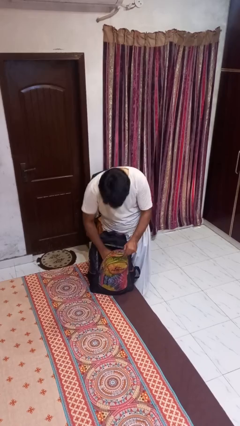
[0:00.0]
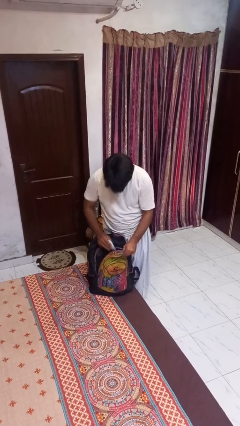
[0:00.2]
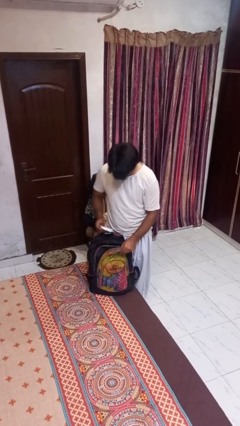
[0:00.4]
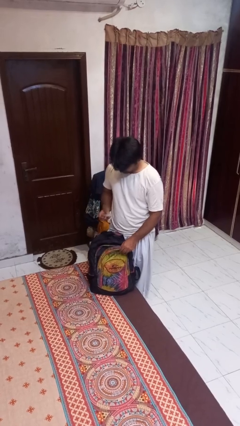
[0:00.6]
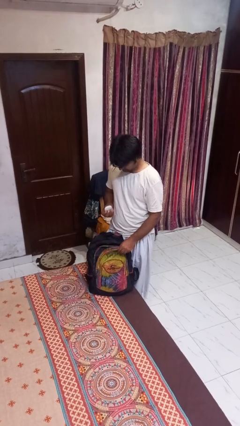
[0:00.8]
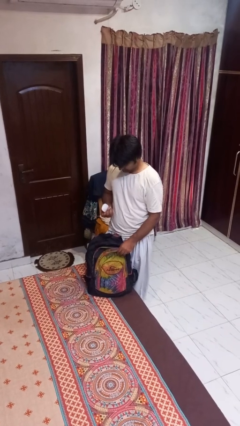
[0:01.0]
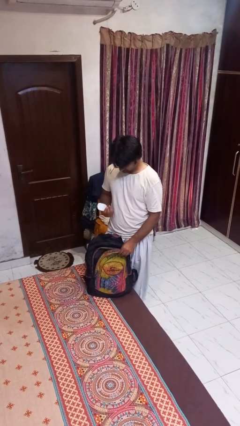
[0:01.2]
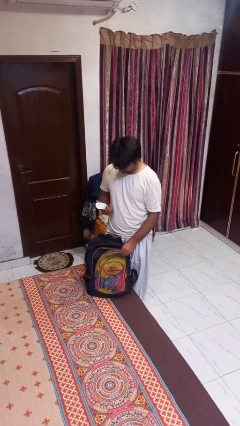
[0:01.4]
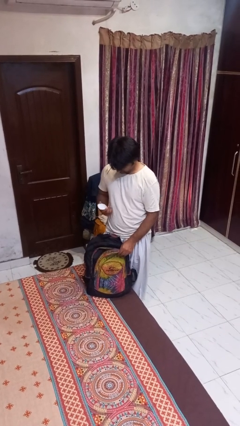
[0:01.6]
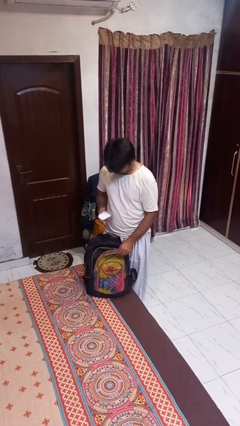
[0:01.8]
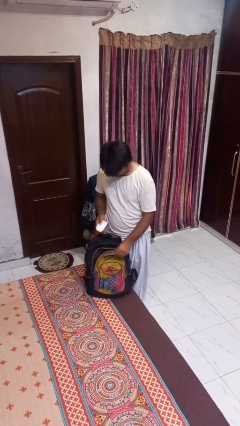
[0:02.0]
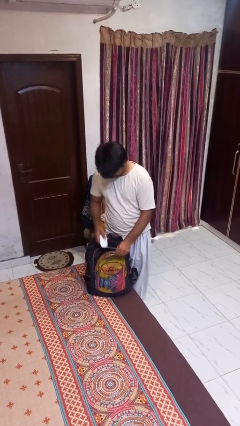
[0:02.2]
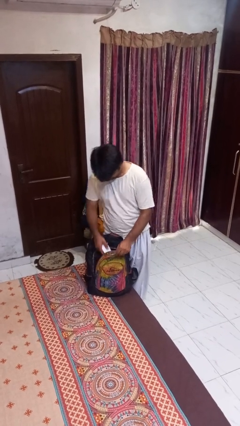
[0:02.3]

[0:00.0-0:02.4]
person takes object from backpack

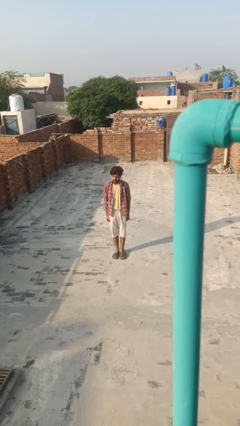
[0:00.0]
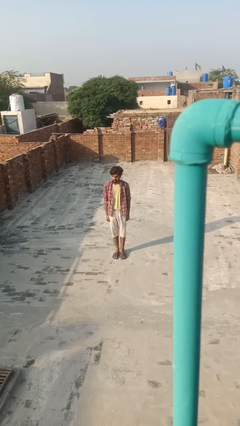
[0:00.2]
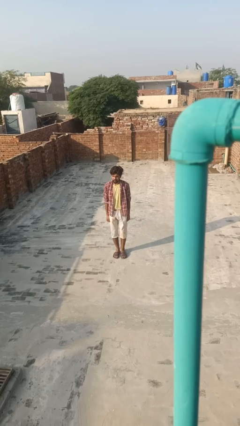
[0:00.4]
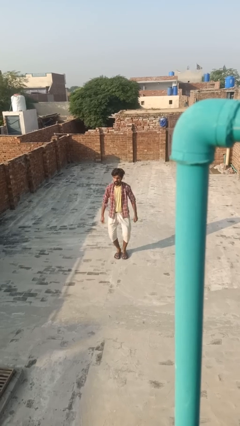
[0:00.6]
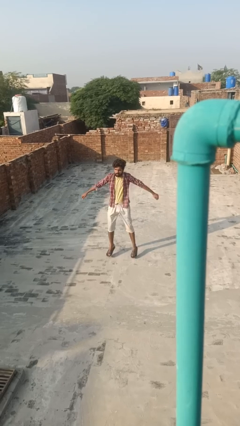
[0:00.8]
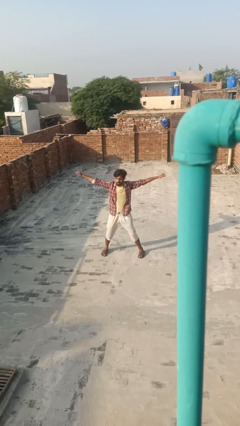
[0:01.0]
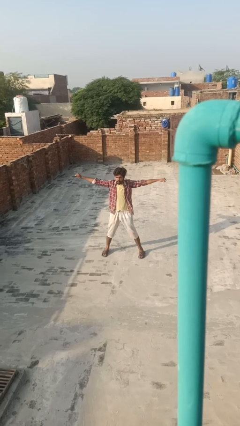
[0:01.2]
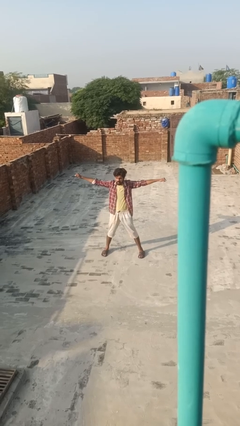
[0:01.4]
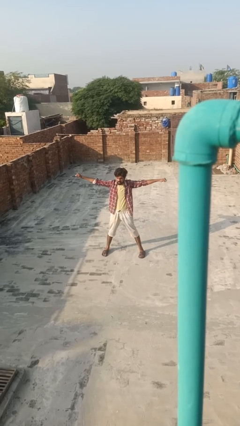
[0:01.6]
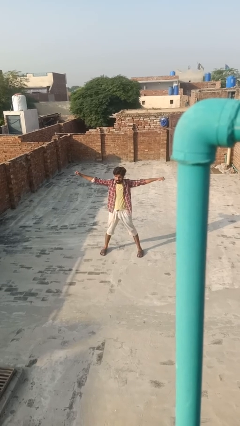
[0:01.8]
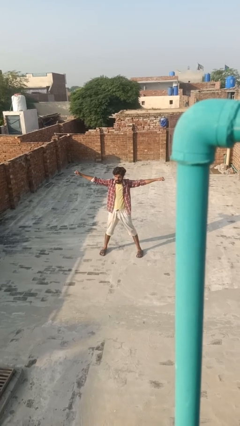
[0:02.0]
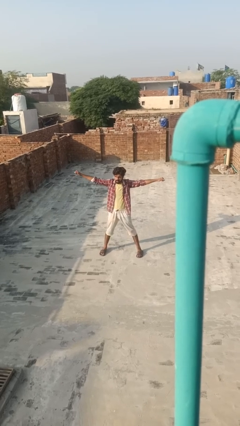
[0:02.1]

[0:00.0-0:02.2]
person exercises with jumping jacks

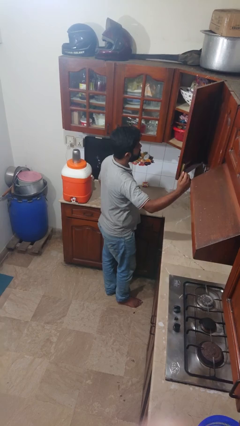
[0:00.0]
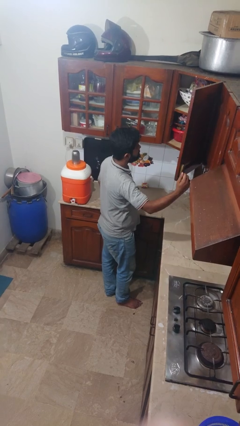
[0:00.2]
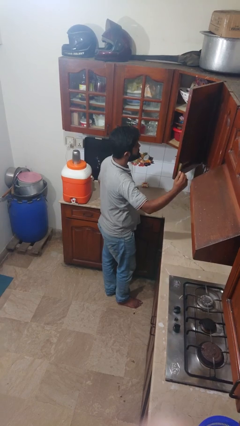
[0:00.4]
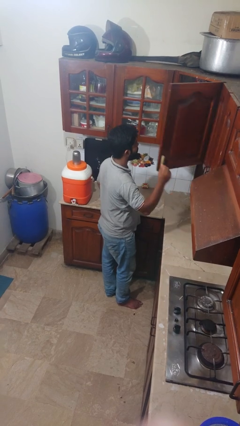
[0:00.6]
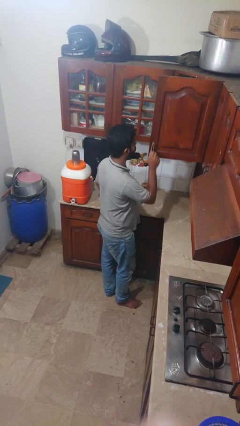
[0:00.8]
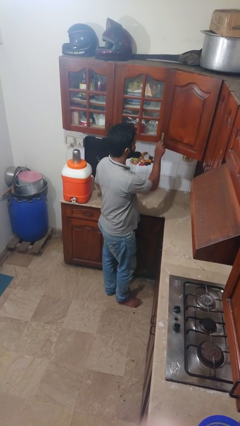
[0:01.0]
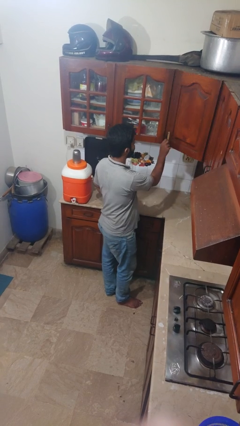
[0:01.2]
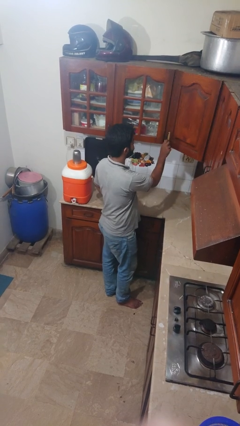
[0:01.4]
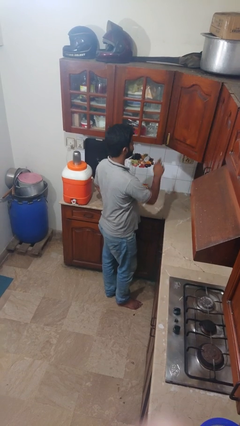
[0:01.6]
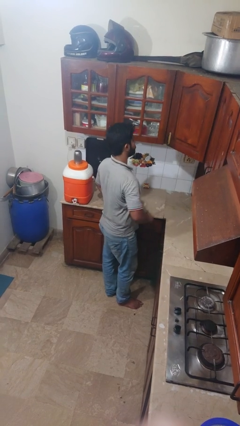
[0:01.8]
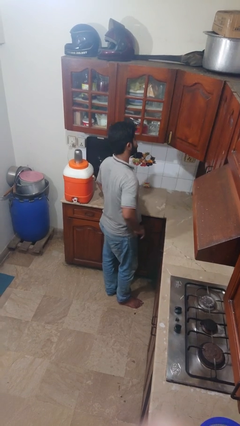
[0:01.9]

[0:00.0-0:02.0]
person closes cabinet

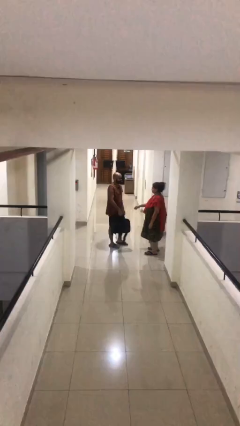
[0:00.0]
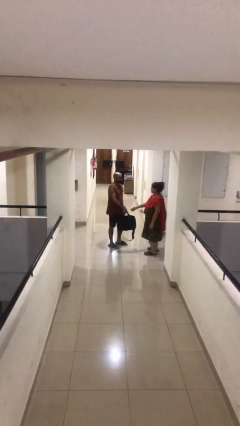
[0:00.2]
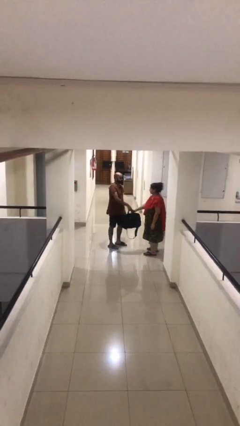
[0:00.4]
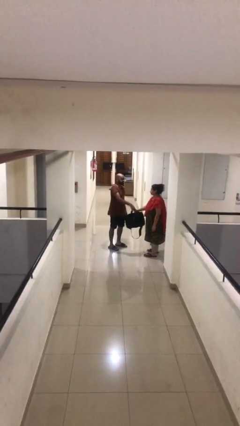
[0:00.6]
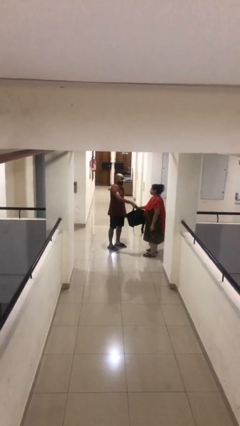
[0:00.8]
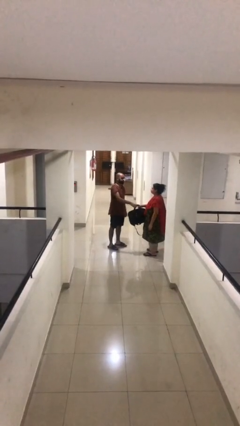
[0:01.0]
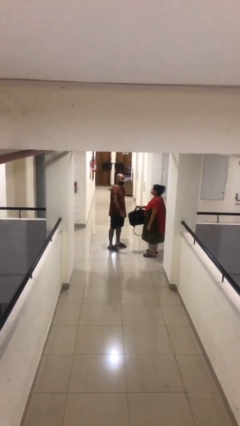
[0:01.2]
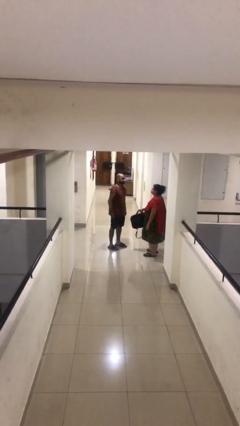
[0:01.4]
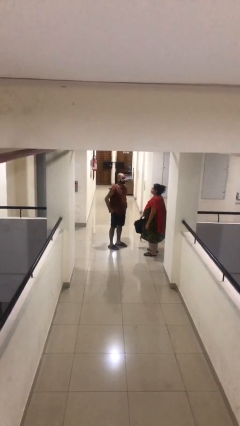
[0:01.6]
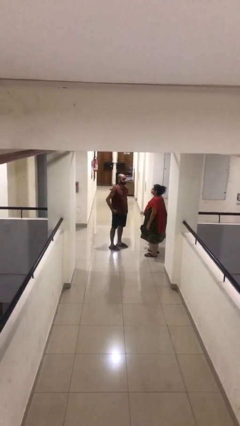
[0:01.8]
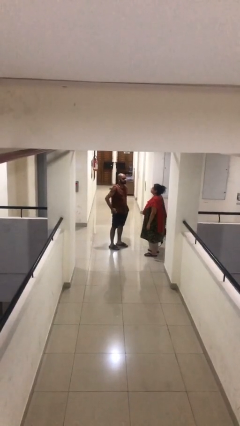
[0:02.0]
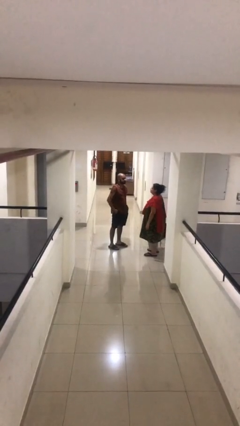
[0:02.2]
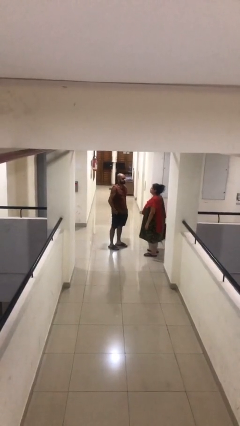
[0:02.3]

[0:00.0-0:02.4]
person transfers object to person

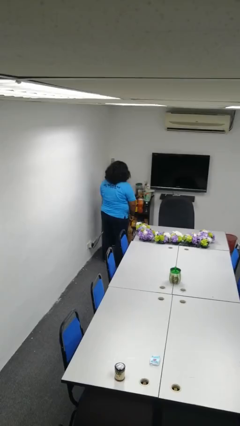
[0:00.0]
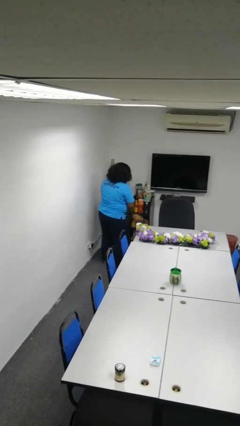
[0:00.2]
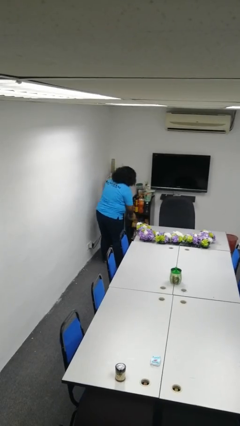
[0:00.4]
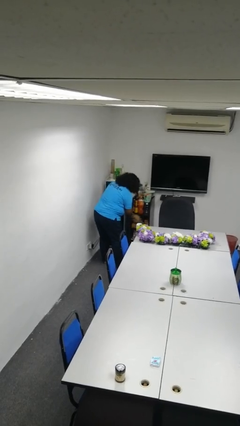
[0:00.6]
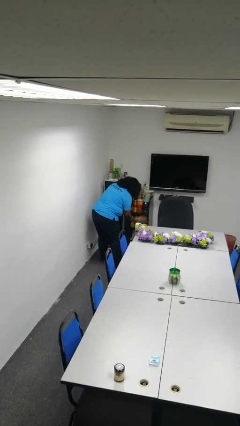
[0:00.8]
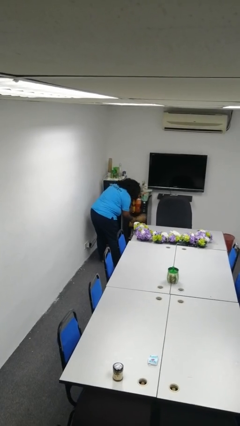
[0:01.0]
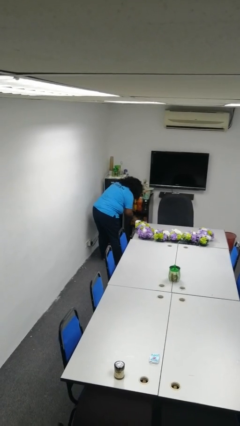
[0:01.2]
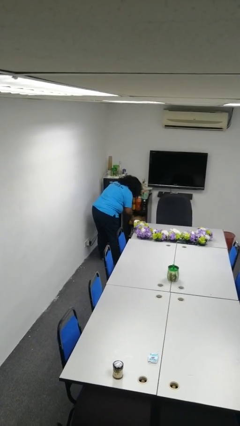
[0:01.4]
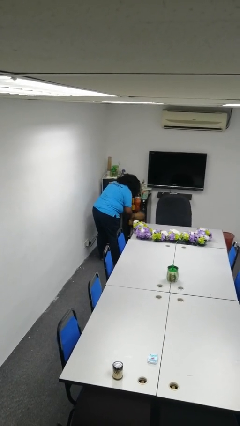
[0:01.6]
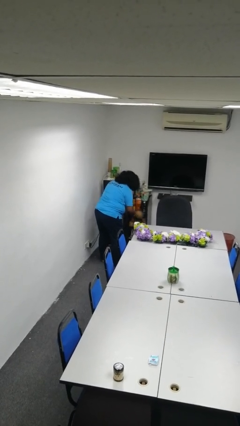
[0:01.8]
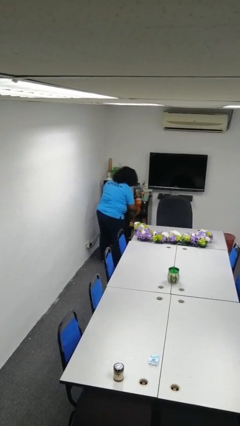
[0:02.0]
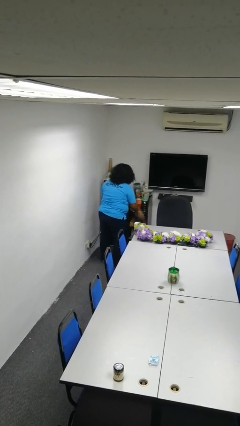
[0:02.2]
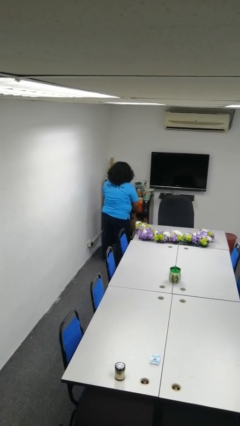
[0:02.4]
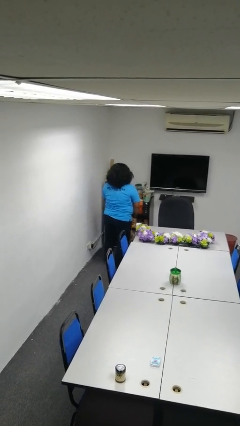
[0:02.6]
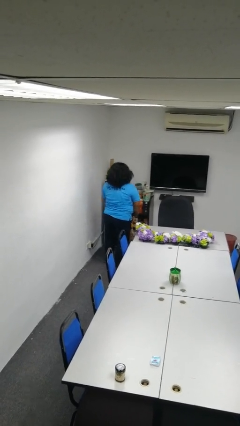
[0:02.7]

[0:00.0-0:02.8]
person dusts furniture

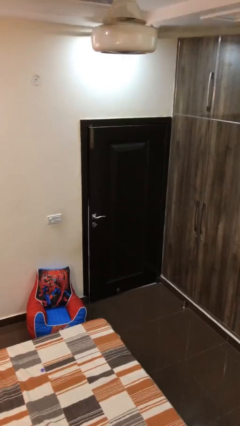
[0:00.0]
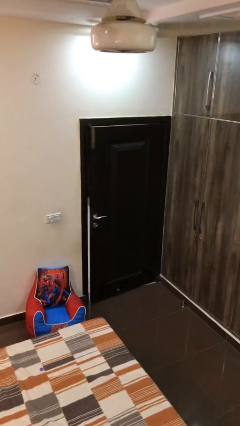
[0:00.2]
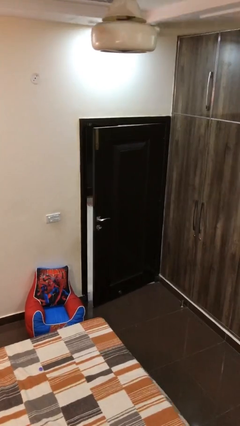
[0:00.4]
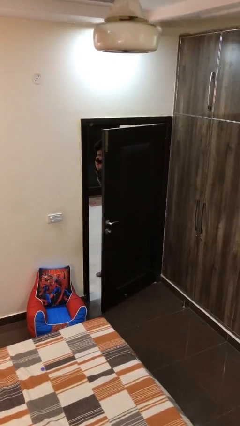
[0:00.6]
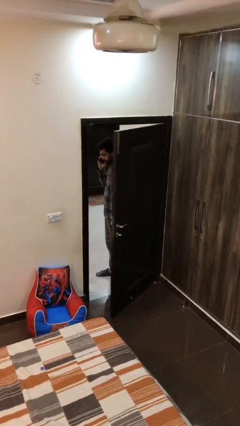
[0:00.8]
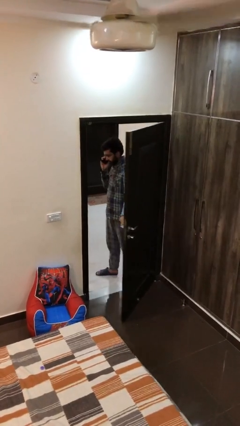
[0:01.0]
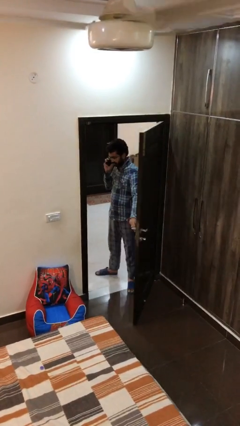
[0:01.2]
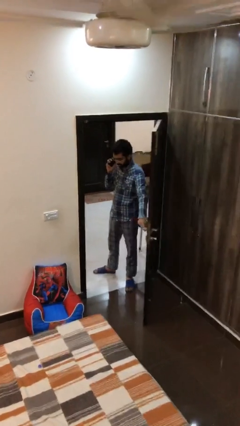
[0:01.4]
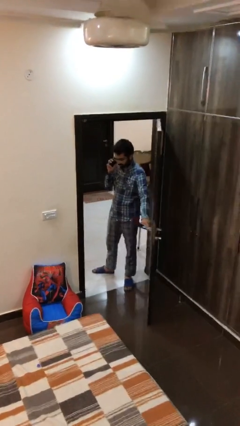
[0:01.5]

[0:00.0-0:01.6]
person opens facility door

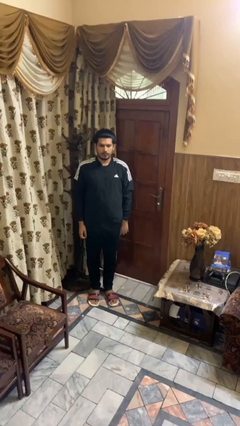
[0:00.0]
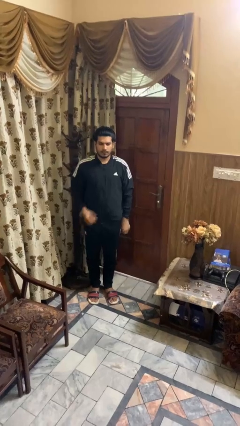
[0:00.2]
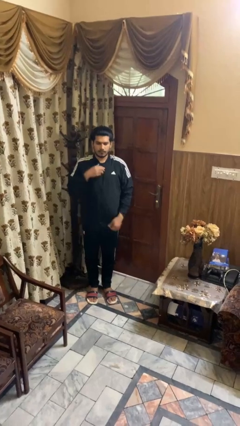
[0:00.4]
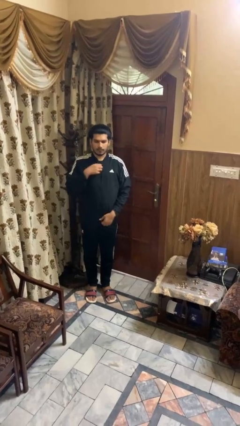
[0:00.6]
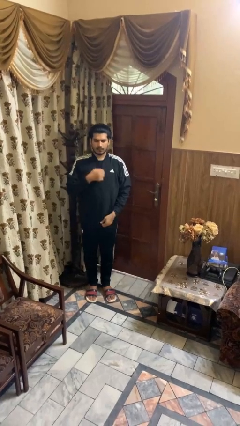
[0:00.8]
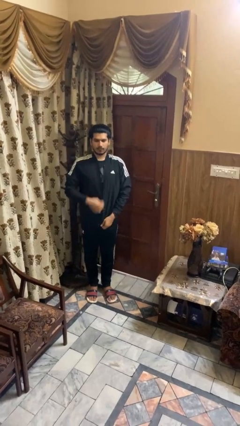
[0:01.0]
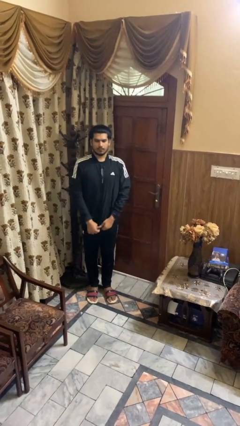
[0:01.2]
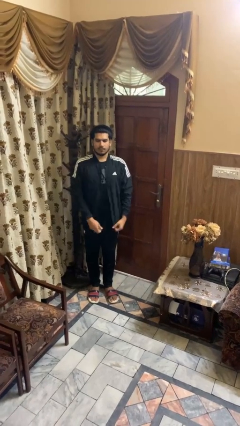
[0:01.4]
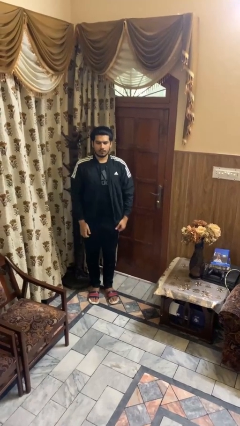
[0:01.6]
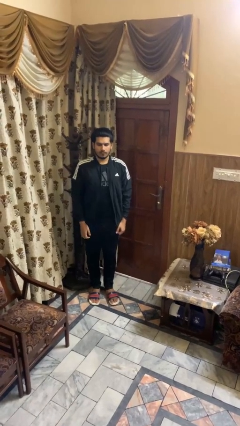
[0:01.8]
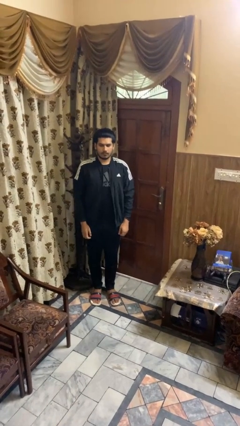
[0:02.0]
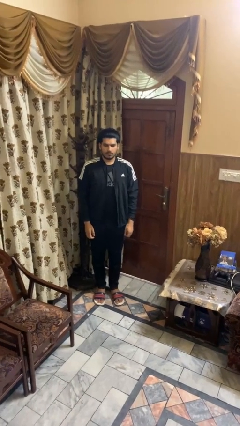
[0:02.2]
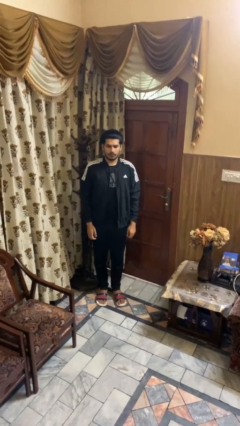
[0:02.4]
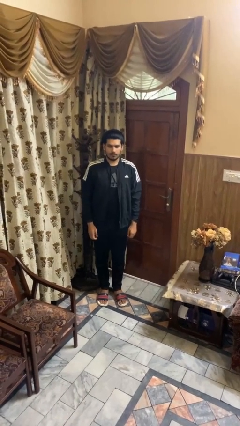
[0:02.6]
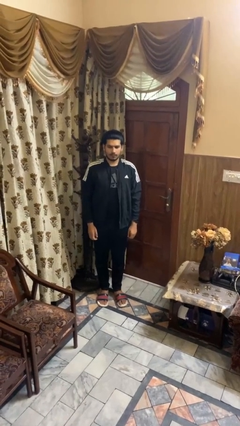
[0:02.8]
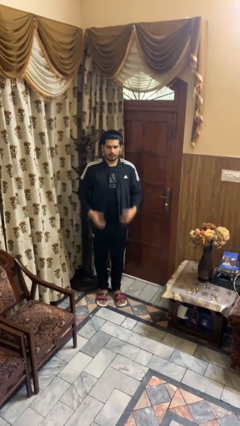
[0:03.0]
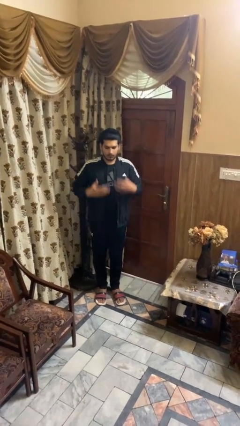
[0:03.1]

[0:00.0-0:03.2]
person unzips jacket

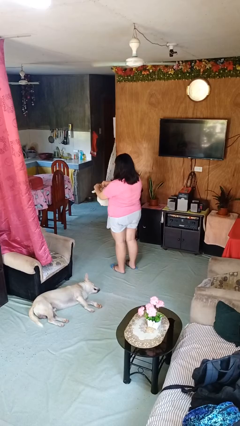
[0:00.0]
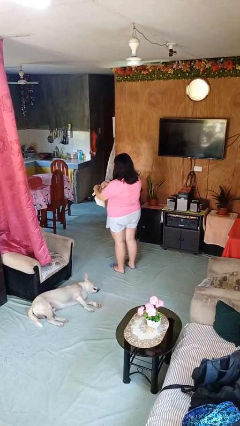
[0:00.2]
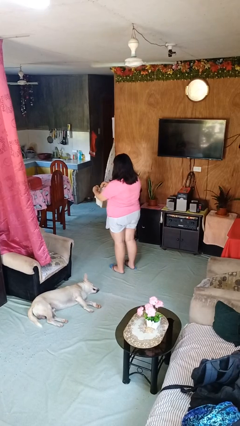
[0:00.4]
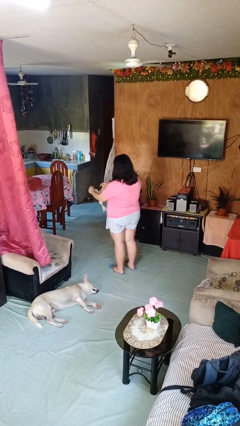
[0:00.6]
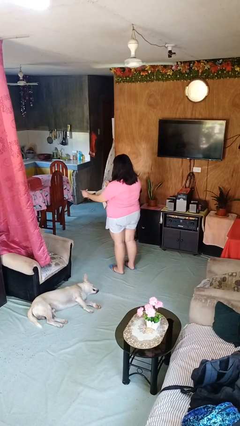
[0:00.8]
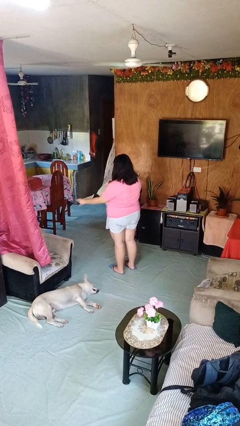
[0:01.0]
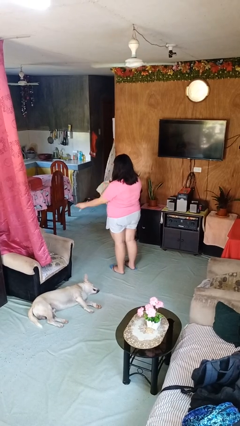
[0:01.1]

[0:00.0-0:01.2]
person tears paper
